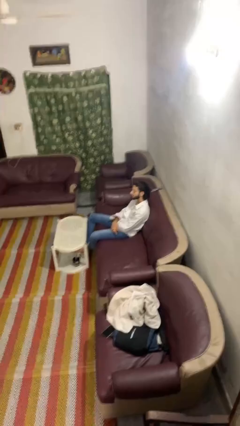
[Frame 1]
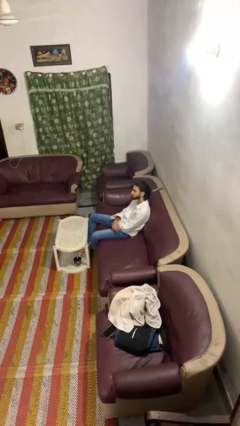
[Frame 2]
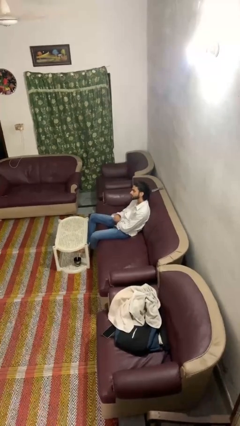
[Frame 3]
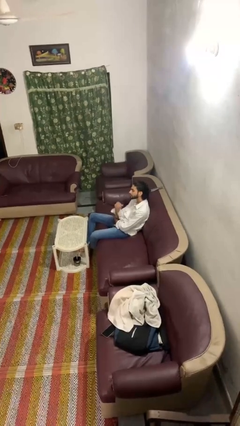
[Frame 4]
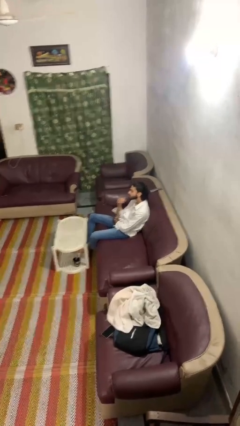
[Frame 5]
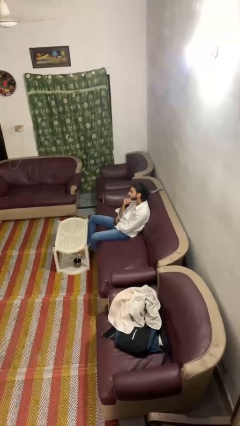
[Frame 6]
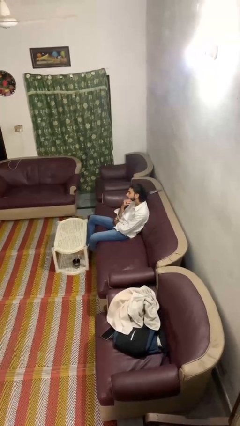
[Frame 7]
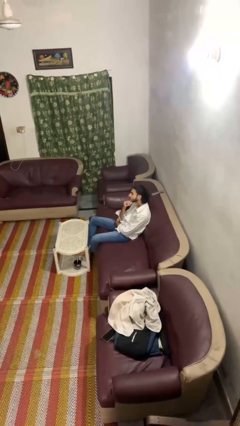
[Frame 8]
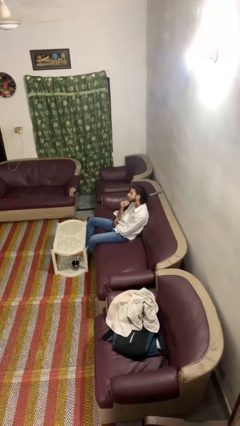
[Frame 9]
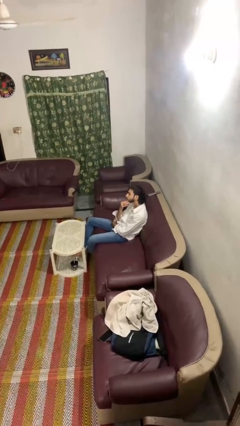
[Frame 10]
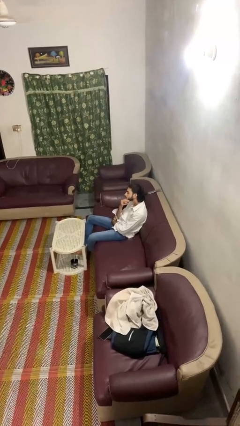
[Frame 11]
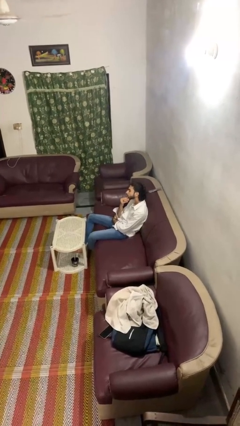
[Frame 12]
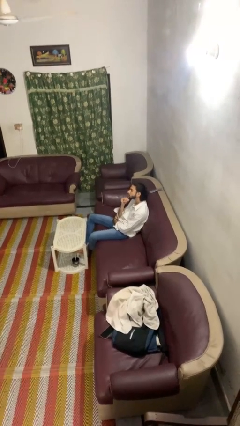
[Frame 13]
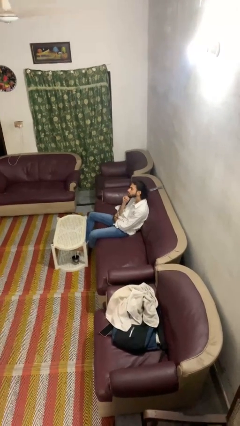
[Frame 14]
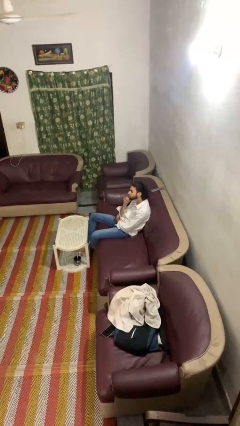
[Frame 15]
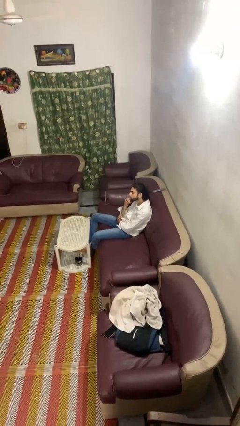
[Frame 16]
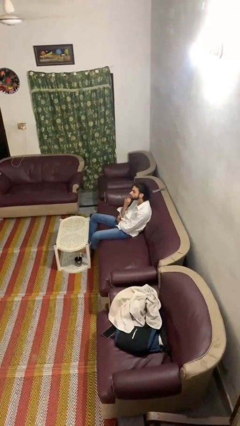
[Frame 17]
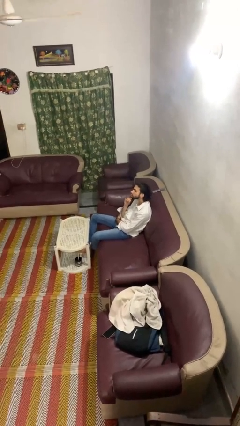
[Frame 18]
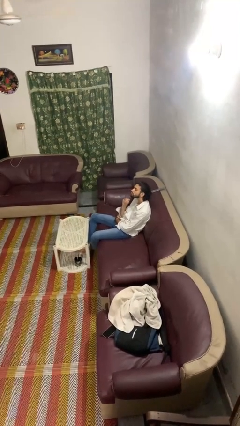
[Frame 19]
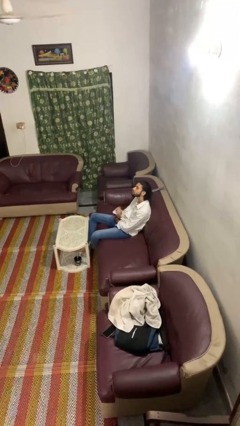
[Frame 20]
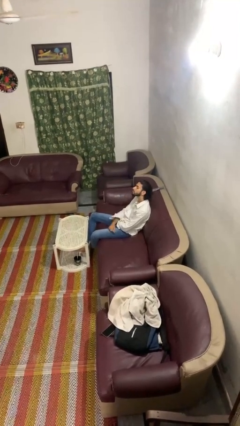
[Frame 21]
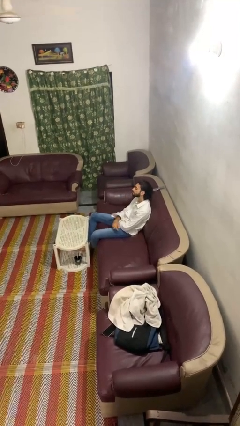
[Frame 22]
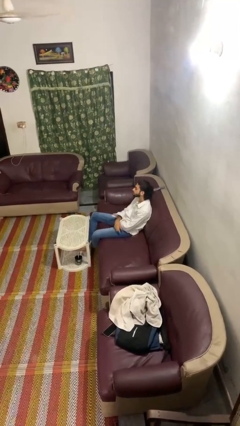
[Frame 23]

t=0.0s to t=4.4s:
person strokes chin

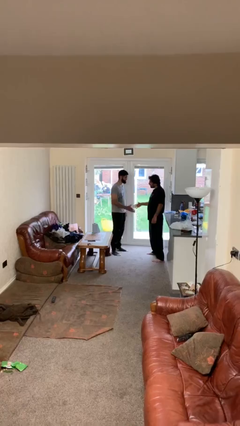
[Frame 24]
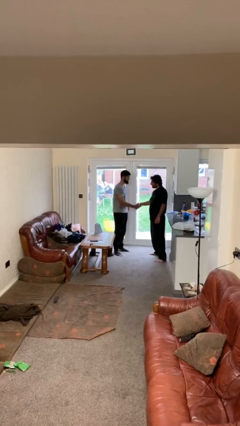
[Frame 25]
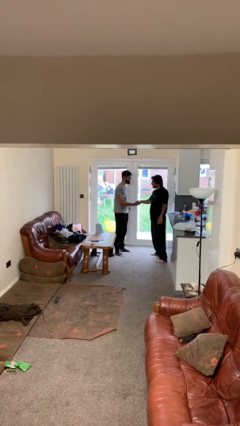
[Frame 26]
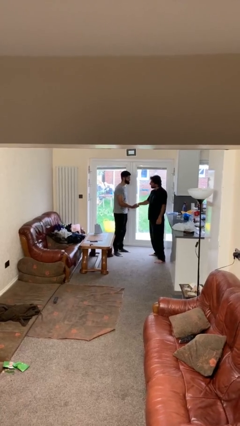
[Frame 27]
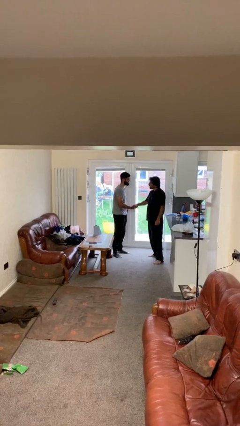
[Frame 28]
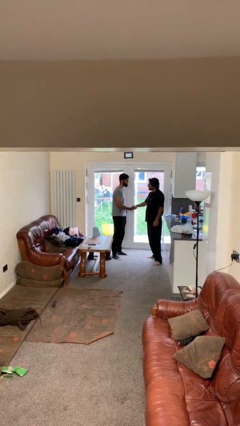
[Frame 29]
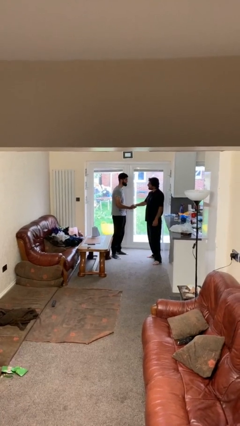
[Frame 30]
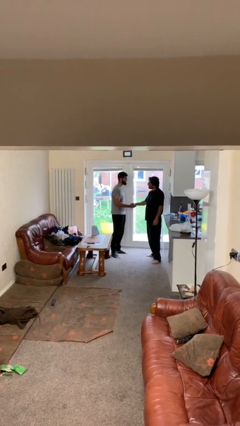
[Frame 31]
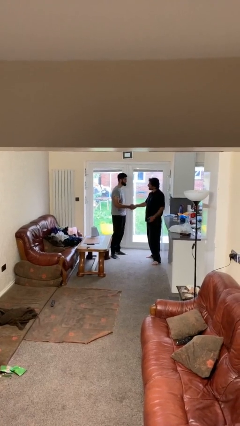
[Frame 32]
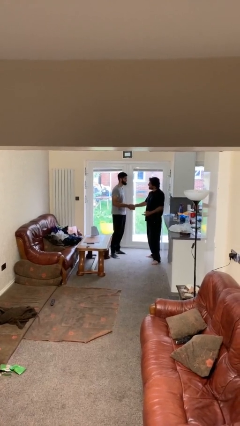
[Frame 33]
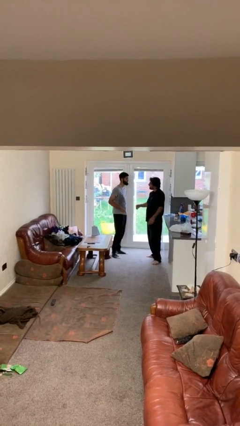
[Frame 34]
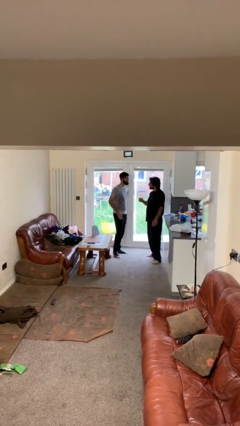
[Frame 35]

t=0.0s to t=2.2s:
person shakes hand

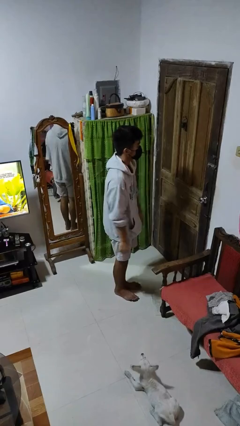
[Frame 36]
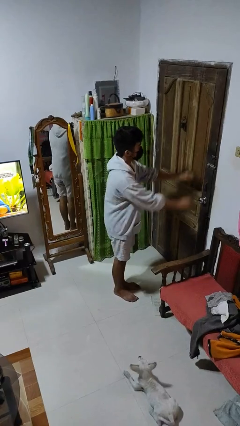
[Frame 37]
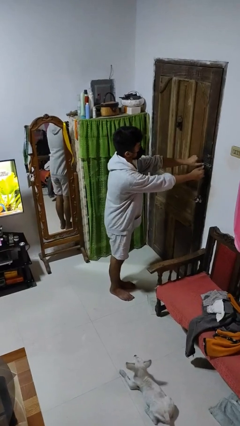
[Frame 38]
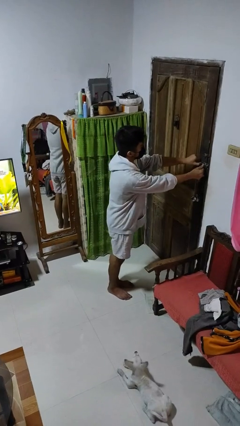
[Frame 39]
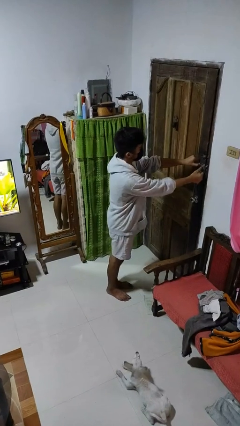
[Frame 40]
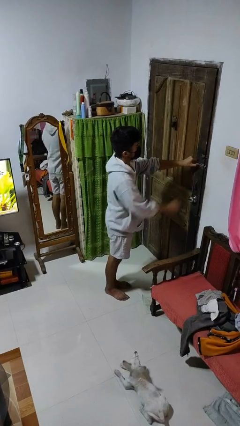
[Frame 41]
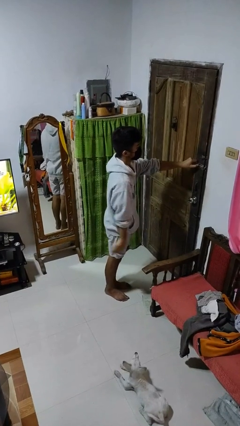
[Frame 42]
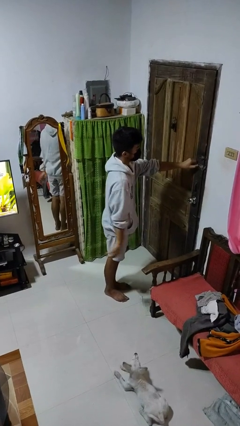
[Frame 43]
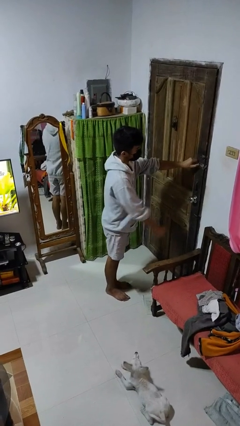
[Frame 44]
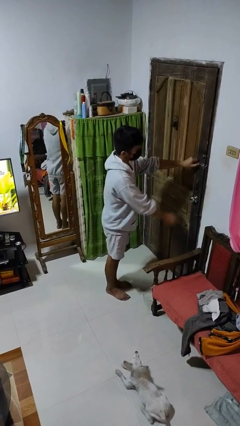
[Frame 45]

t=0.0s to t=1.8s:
person unlocks door with keys

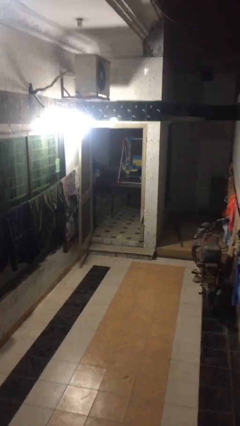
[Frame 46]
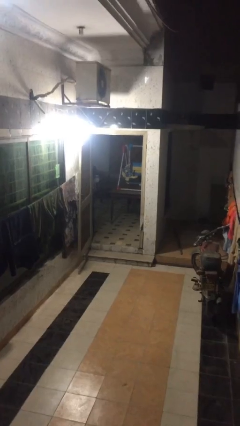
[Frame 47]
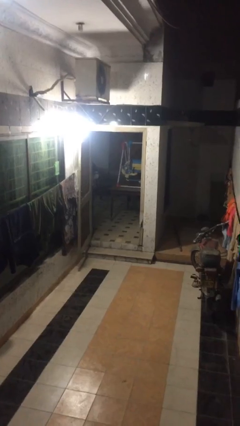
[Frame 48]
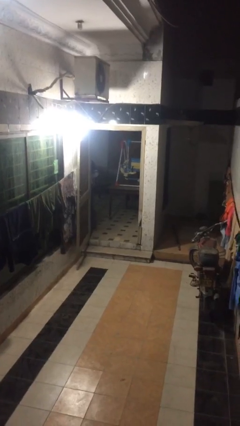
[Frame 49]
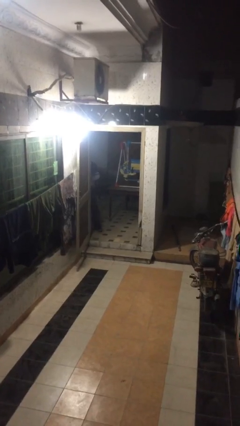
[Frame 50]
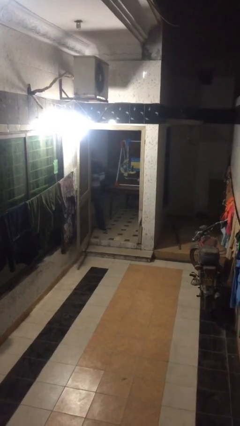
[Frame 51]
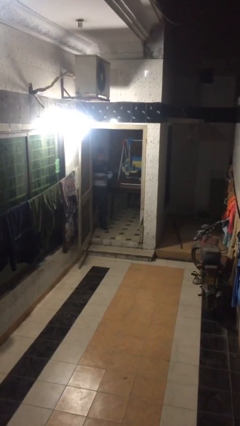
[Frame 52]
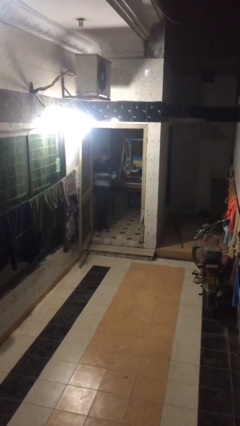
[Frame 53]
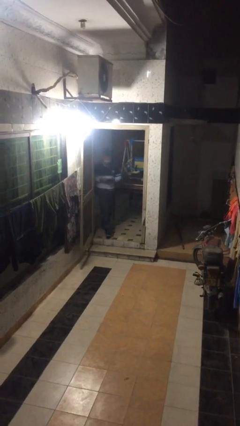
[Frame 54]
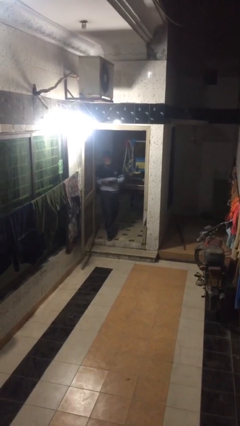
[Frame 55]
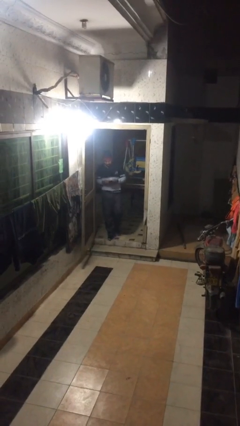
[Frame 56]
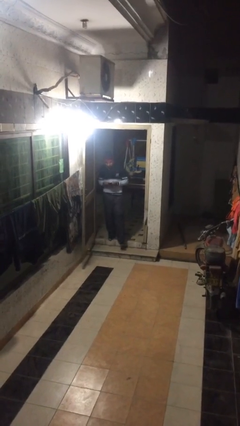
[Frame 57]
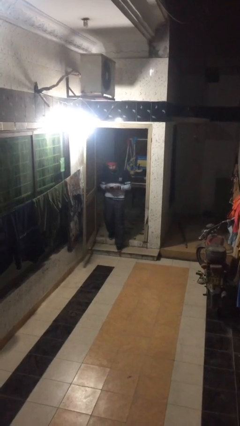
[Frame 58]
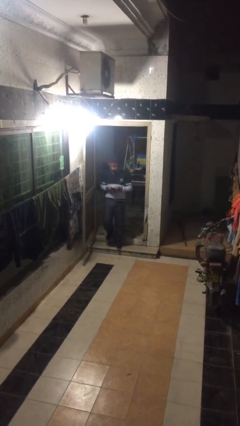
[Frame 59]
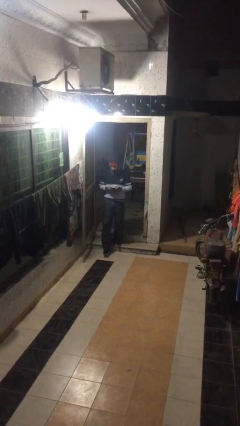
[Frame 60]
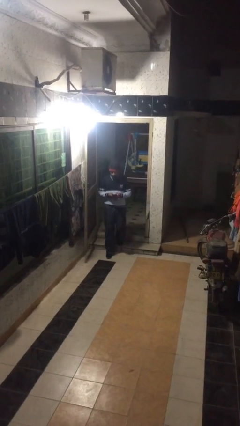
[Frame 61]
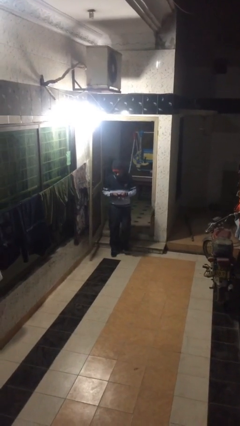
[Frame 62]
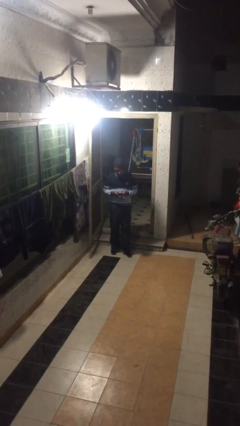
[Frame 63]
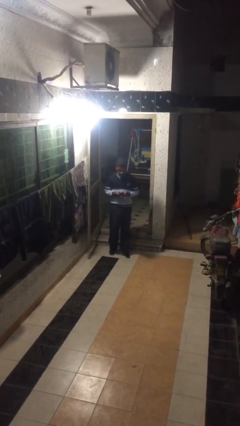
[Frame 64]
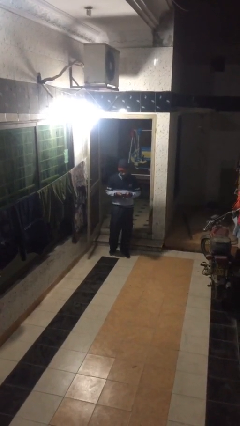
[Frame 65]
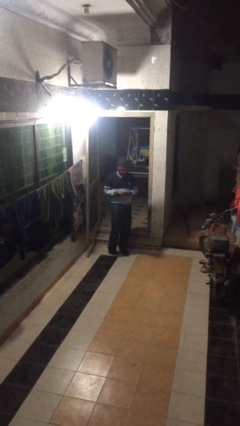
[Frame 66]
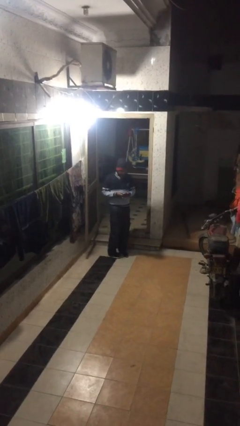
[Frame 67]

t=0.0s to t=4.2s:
person enters scene through structure

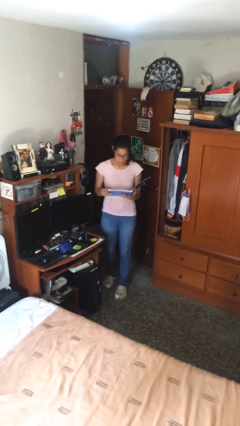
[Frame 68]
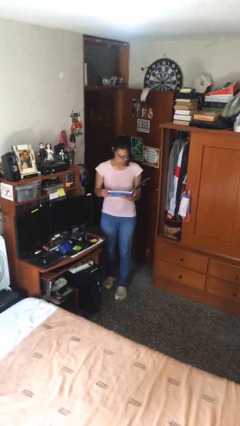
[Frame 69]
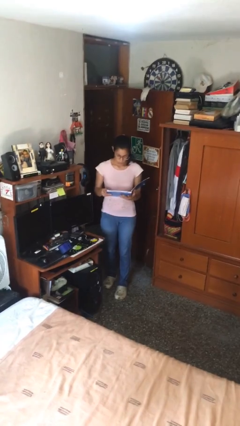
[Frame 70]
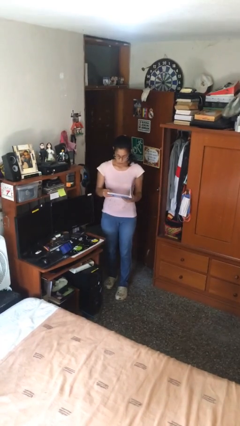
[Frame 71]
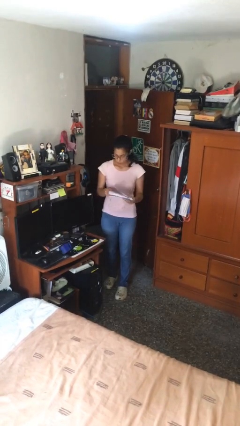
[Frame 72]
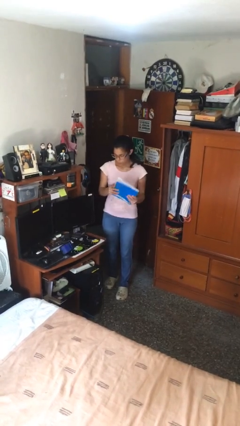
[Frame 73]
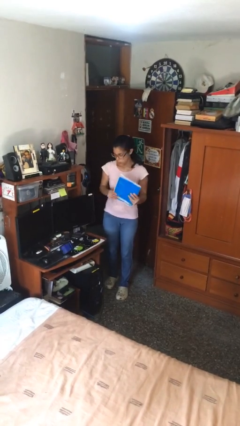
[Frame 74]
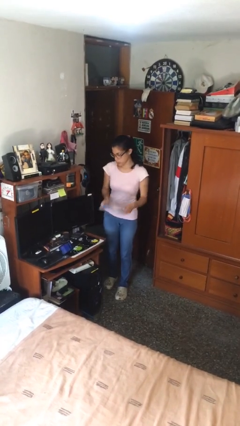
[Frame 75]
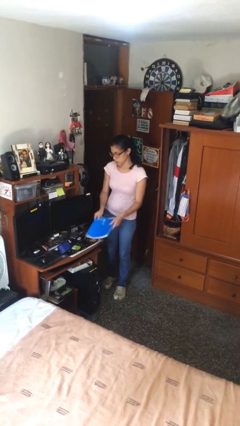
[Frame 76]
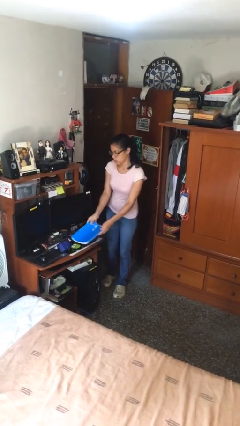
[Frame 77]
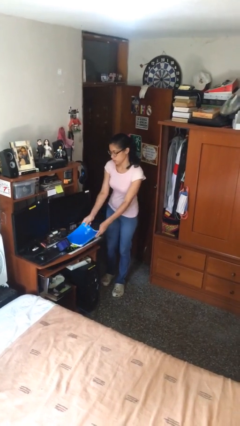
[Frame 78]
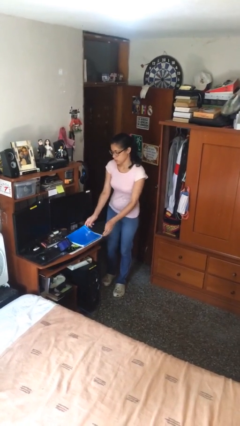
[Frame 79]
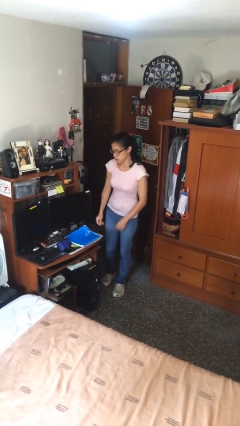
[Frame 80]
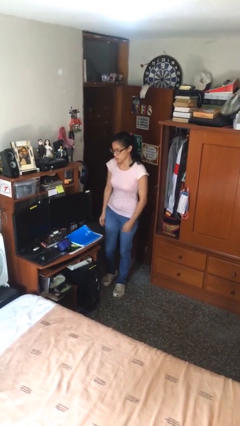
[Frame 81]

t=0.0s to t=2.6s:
person puts down object on table

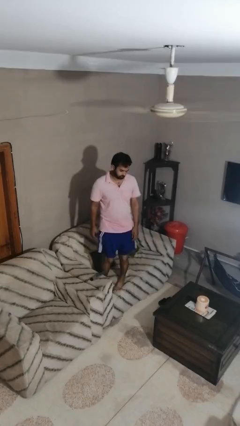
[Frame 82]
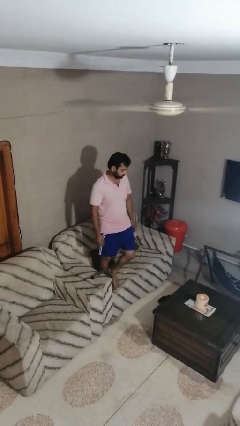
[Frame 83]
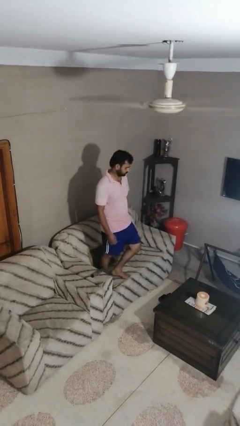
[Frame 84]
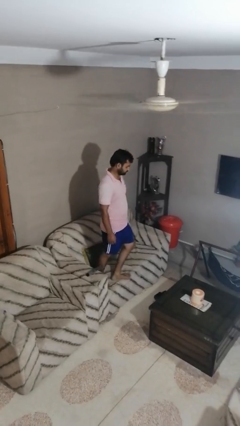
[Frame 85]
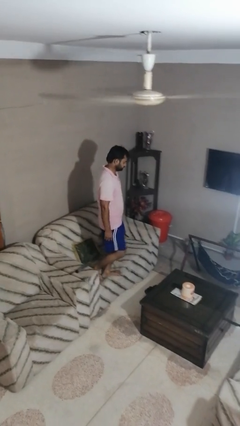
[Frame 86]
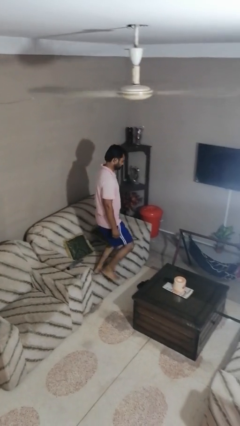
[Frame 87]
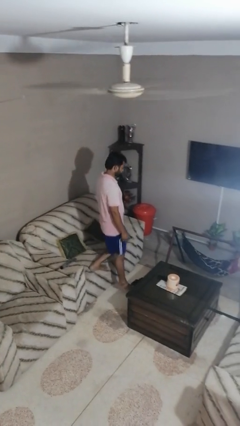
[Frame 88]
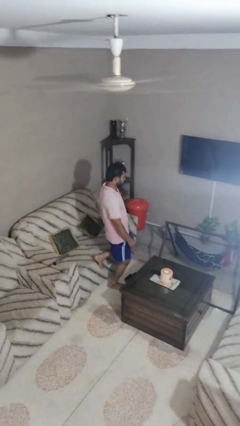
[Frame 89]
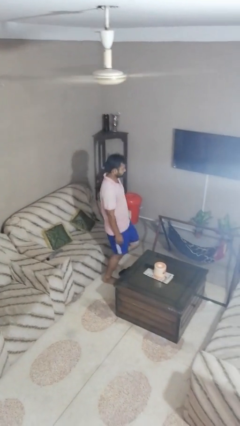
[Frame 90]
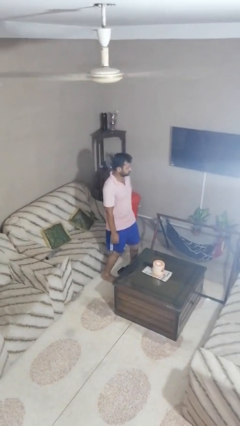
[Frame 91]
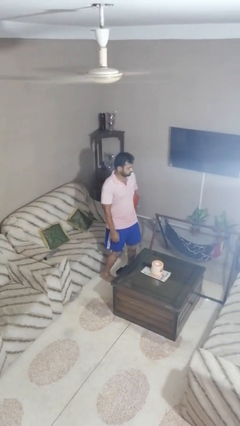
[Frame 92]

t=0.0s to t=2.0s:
person climbs off couch

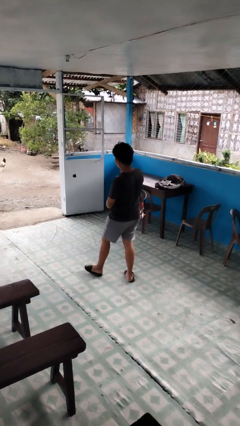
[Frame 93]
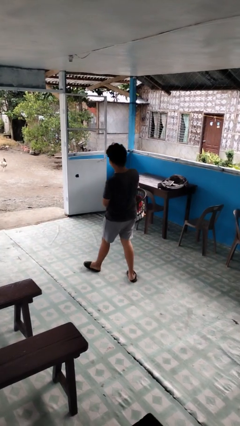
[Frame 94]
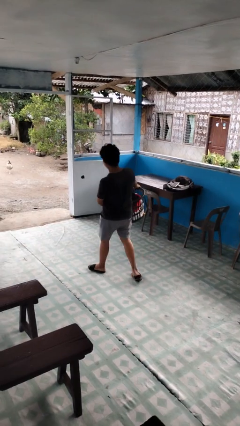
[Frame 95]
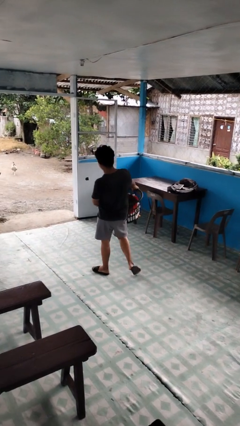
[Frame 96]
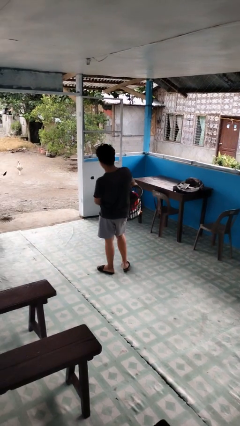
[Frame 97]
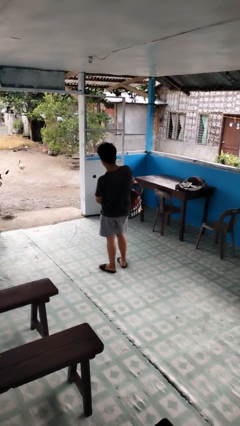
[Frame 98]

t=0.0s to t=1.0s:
person carries laundry basket
